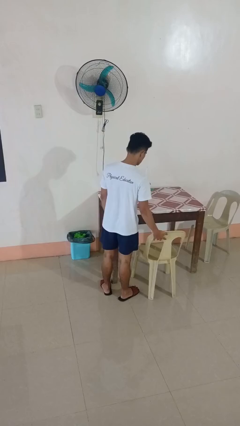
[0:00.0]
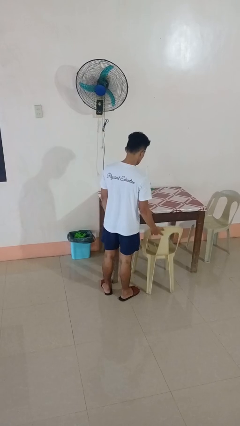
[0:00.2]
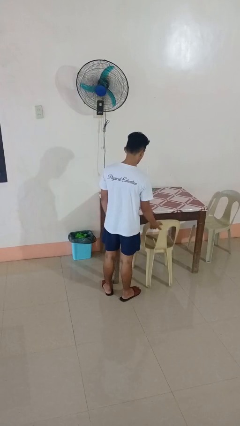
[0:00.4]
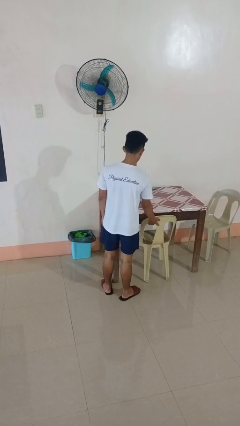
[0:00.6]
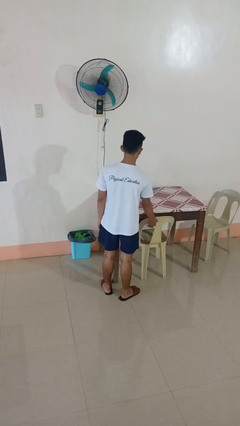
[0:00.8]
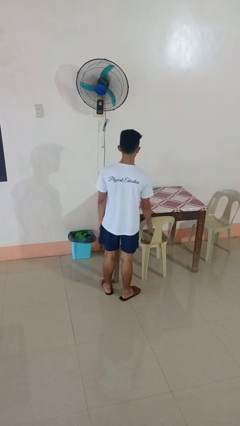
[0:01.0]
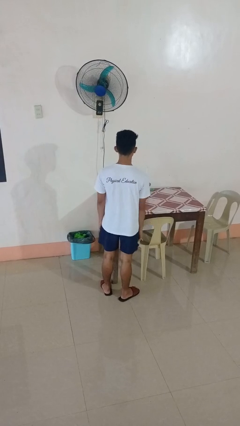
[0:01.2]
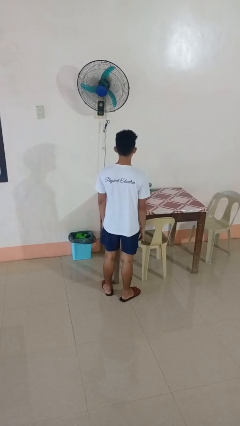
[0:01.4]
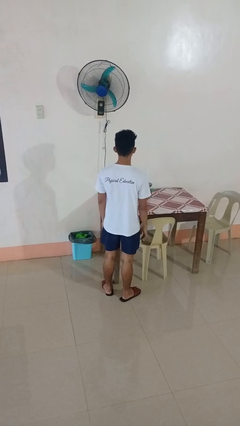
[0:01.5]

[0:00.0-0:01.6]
person pushes in chair

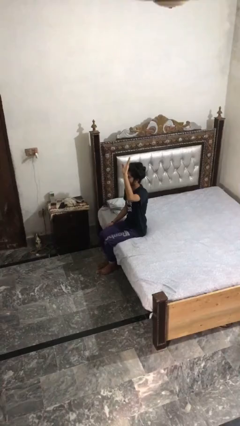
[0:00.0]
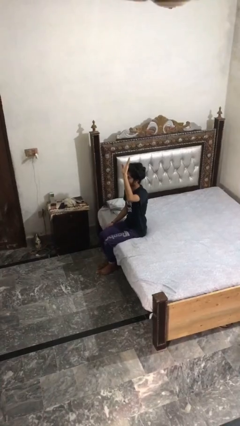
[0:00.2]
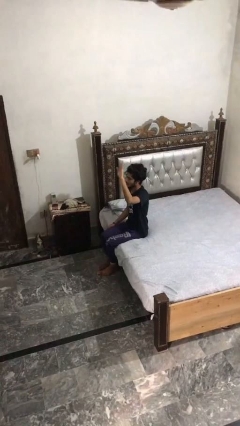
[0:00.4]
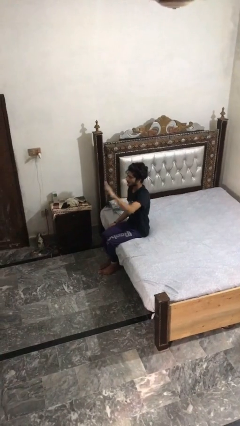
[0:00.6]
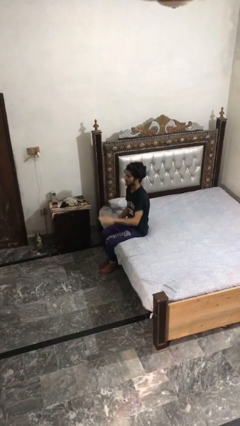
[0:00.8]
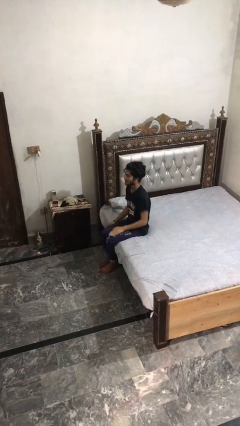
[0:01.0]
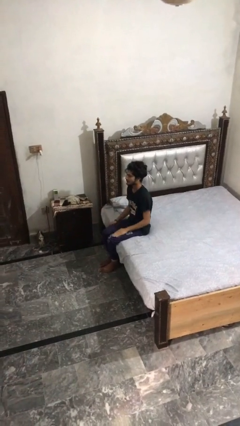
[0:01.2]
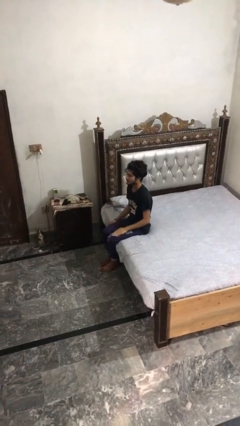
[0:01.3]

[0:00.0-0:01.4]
person gestures lower hand

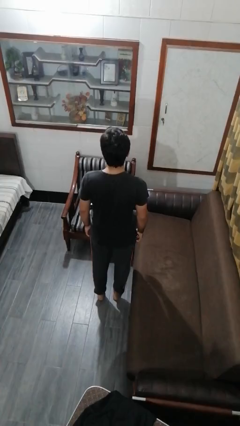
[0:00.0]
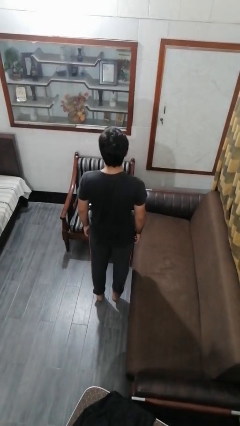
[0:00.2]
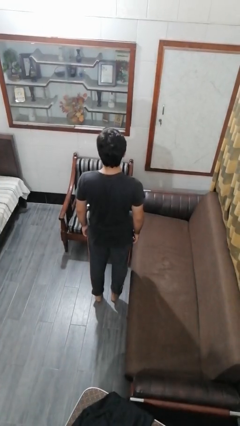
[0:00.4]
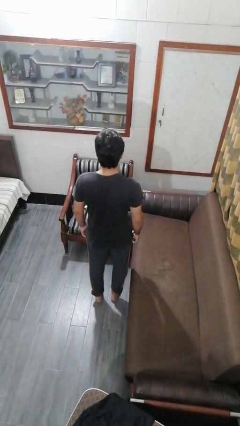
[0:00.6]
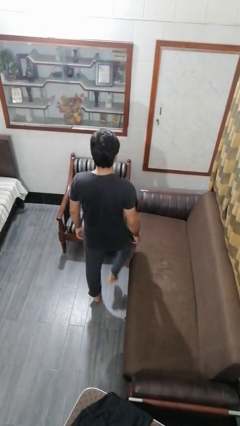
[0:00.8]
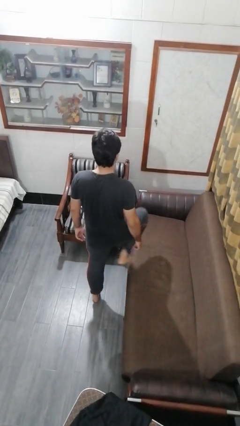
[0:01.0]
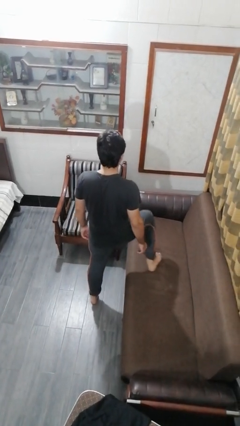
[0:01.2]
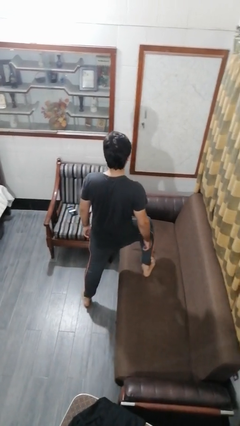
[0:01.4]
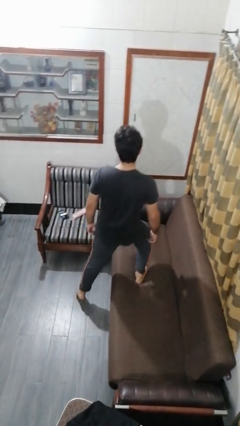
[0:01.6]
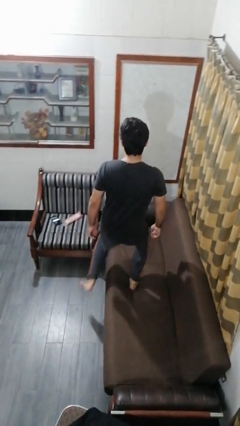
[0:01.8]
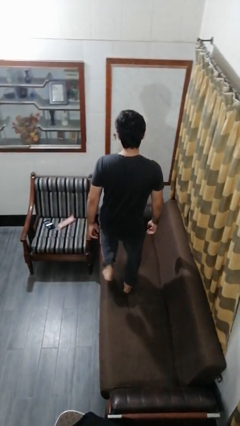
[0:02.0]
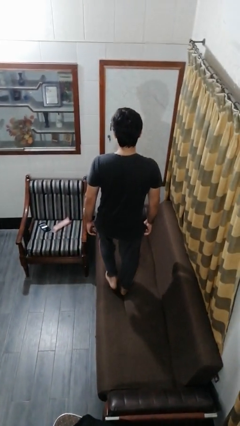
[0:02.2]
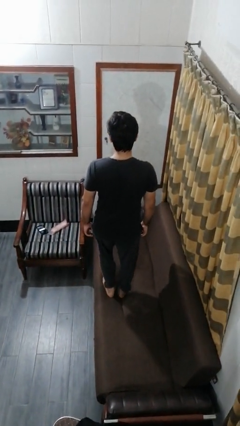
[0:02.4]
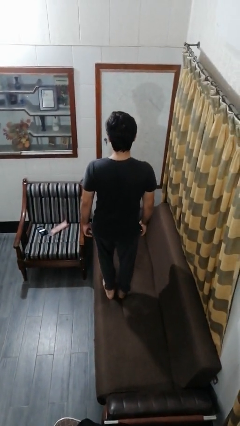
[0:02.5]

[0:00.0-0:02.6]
person climbs on couch

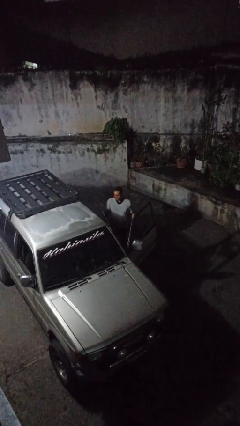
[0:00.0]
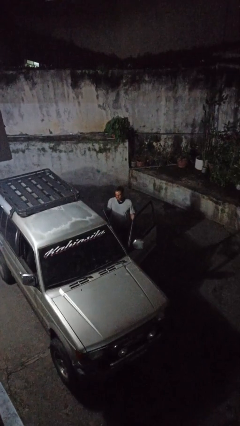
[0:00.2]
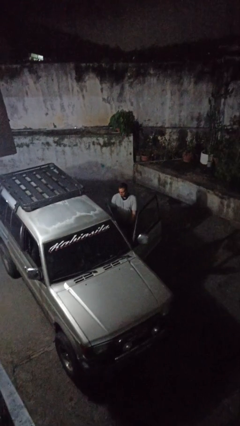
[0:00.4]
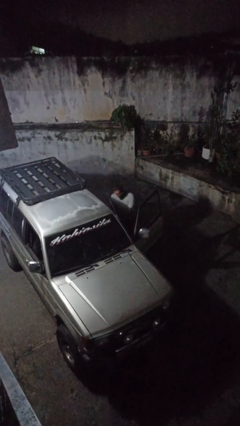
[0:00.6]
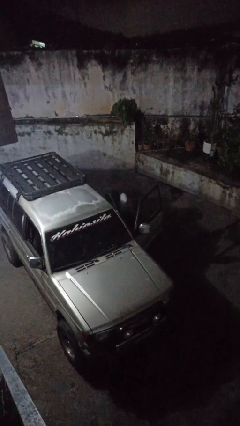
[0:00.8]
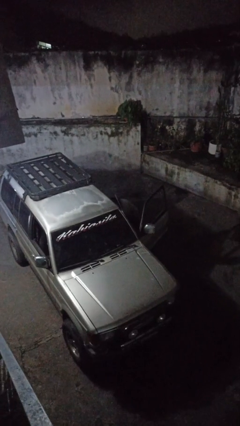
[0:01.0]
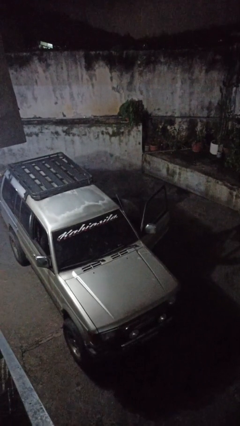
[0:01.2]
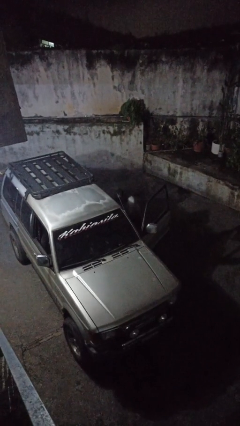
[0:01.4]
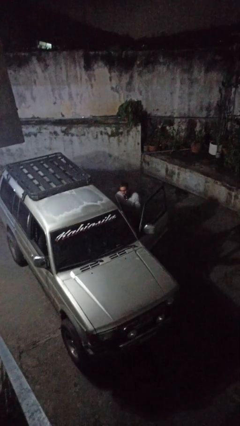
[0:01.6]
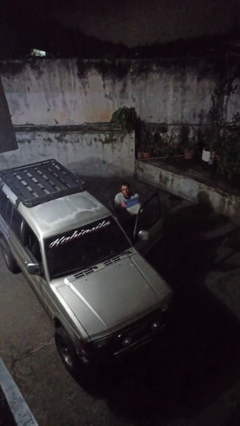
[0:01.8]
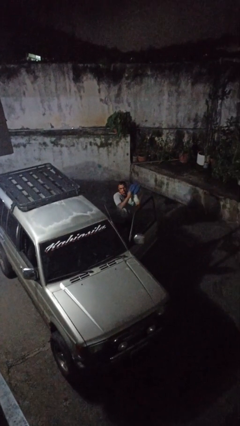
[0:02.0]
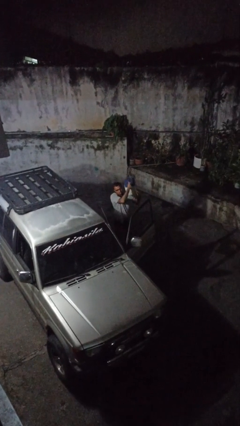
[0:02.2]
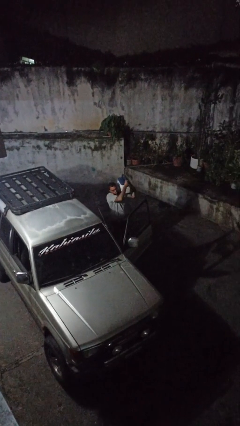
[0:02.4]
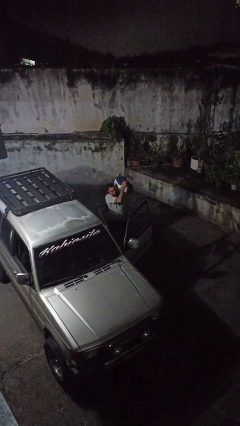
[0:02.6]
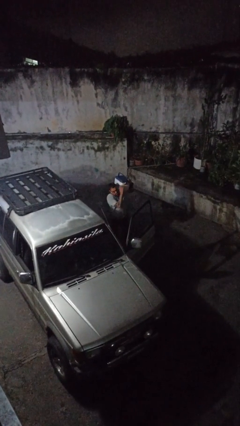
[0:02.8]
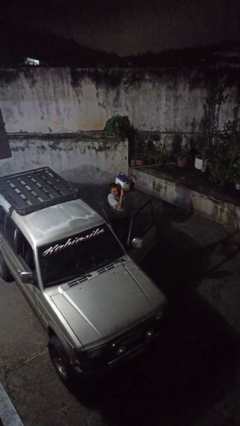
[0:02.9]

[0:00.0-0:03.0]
person unloads car

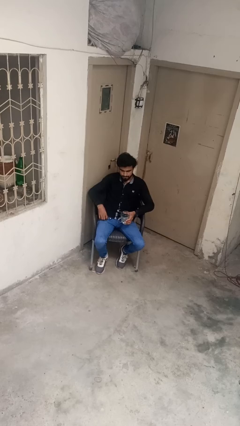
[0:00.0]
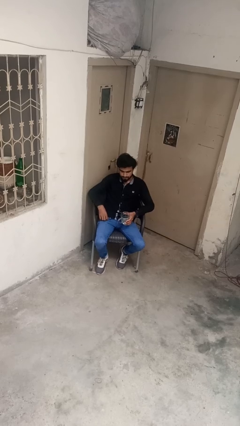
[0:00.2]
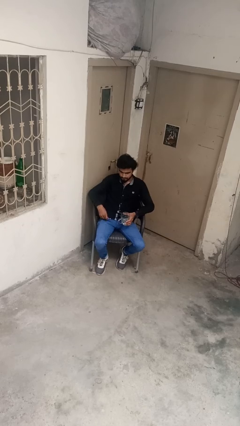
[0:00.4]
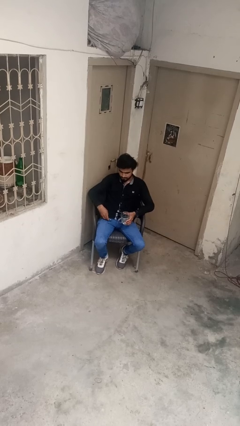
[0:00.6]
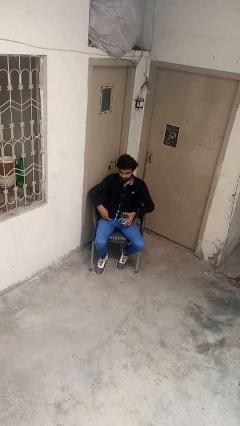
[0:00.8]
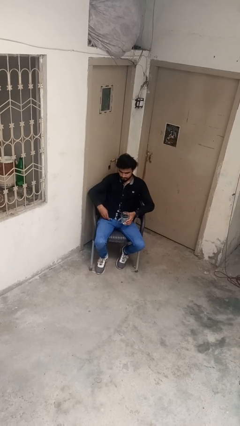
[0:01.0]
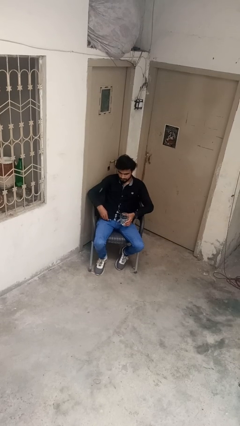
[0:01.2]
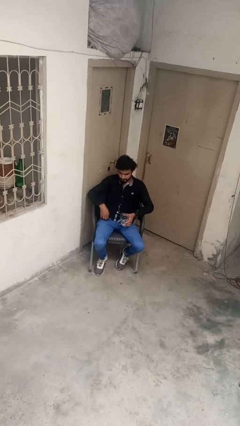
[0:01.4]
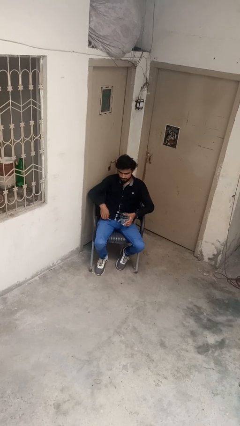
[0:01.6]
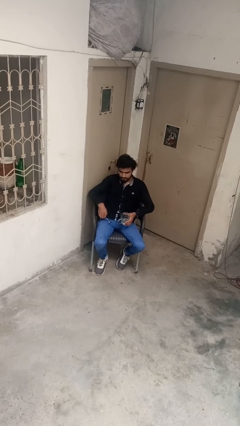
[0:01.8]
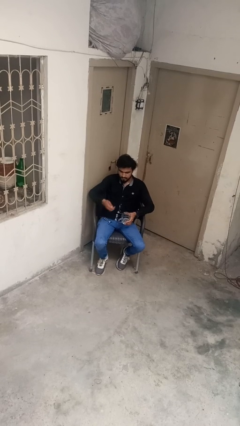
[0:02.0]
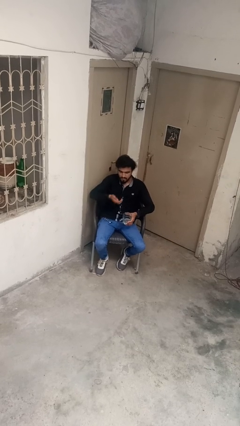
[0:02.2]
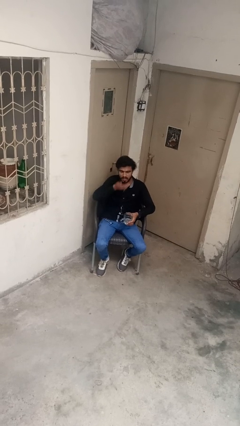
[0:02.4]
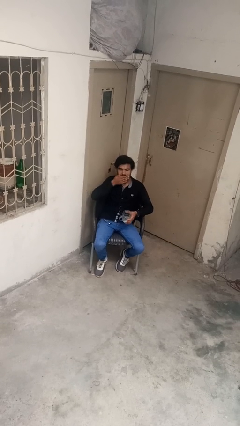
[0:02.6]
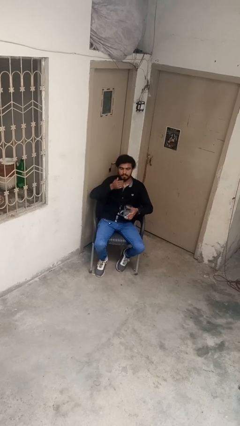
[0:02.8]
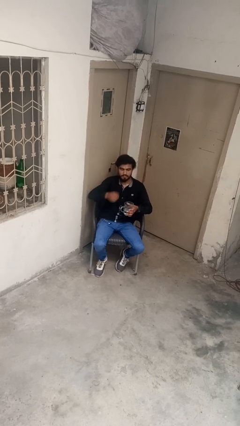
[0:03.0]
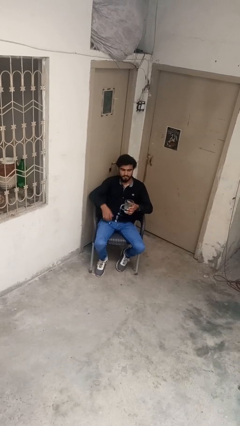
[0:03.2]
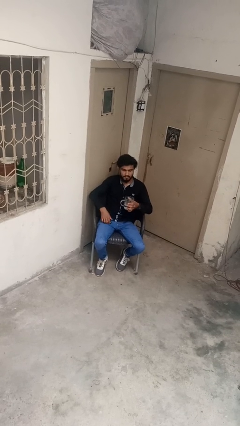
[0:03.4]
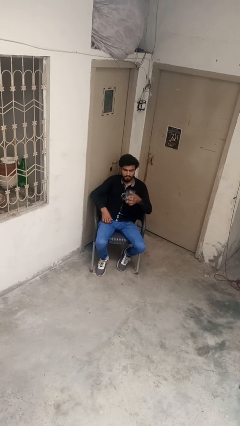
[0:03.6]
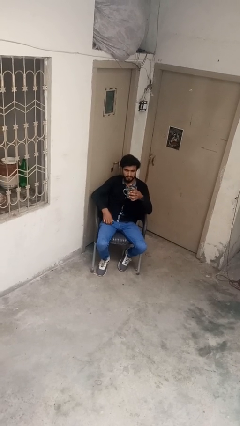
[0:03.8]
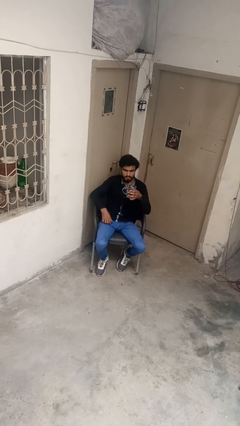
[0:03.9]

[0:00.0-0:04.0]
person takes medicine pills

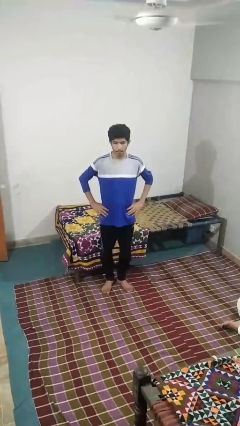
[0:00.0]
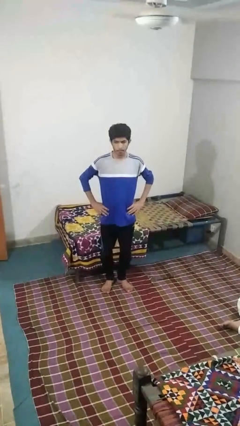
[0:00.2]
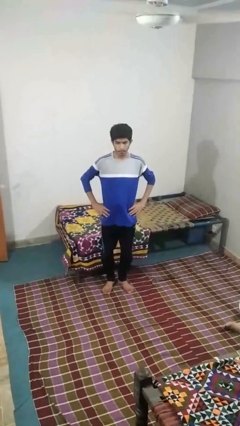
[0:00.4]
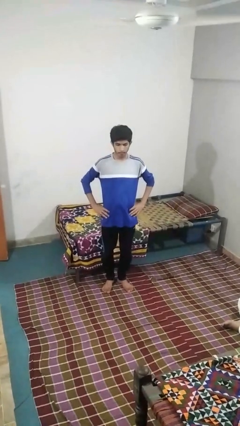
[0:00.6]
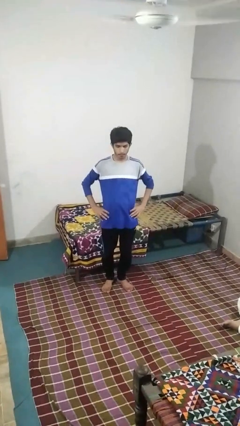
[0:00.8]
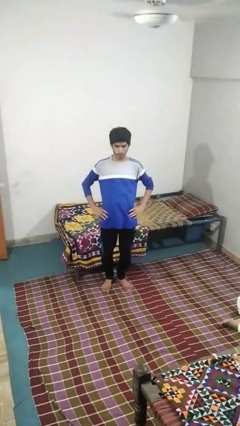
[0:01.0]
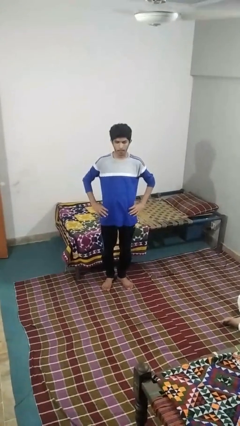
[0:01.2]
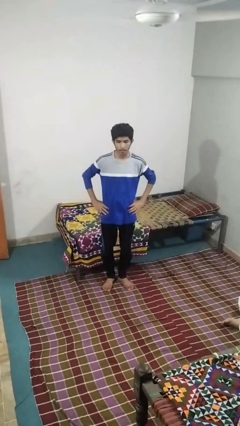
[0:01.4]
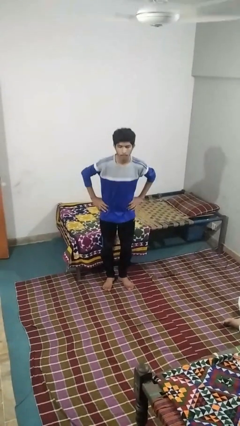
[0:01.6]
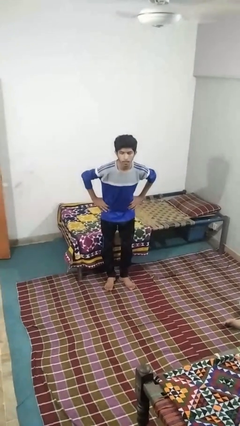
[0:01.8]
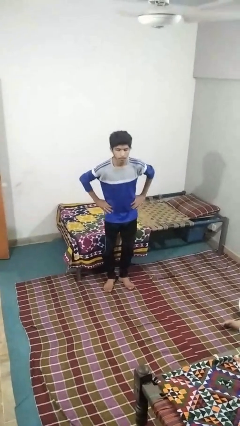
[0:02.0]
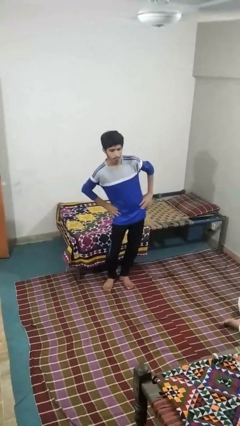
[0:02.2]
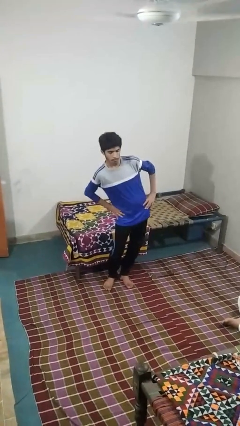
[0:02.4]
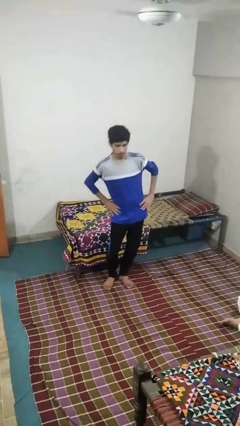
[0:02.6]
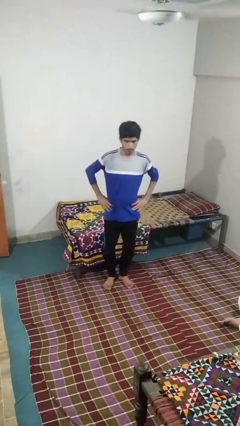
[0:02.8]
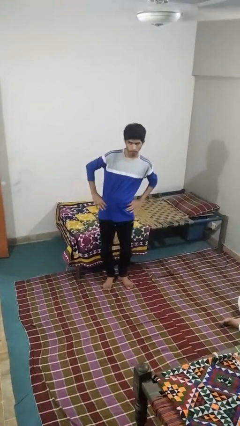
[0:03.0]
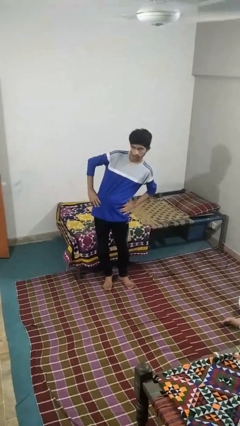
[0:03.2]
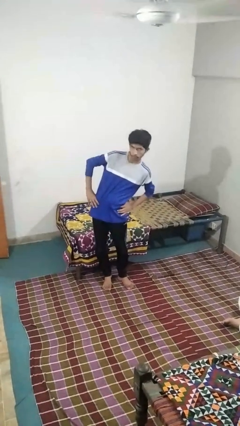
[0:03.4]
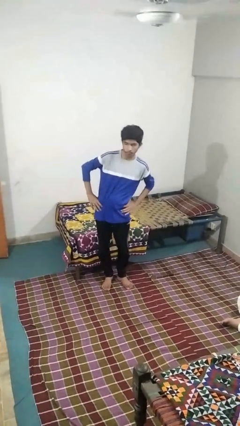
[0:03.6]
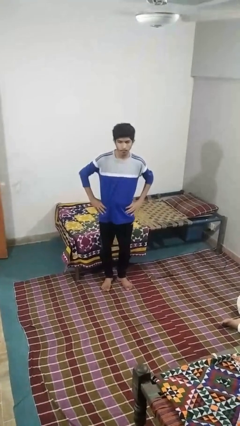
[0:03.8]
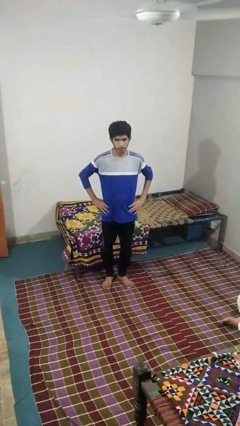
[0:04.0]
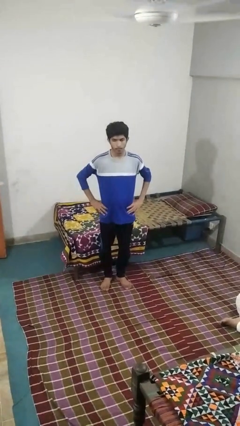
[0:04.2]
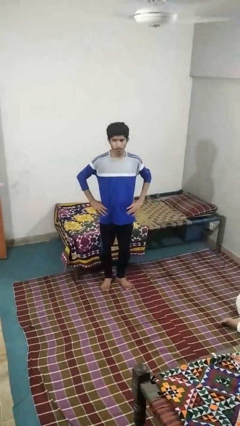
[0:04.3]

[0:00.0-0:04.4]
person wiggles hips

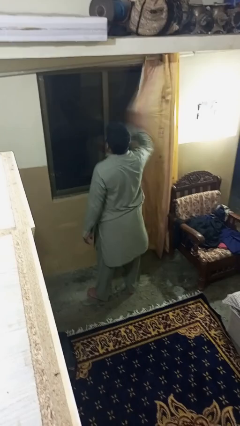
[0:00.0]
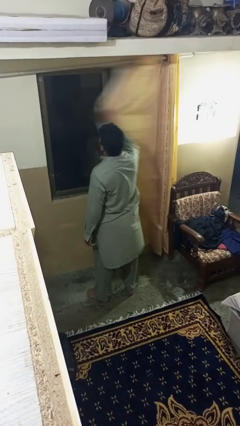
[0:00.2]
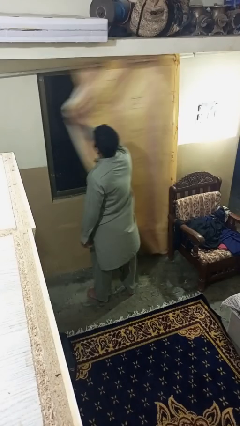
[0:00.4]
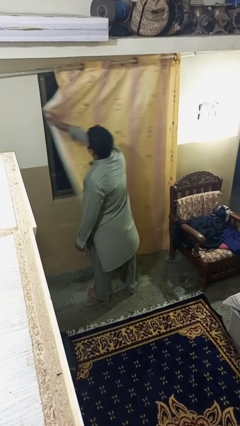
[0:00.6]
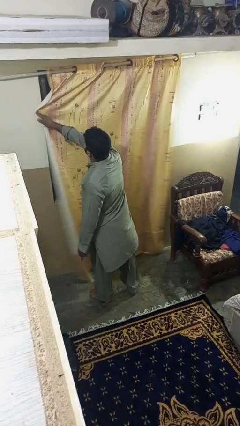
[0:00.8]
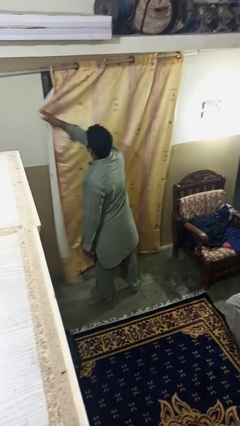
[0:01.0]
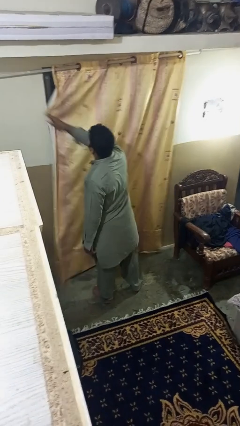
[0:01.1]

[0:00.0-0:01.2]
person closes curtains
